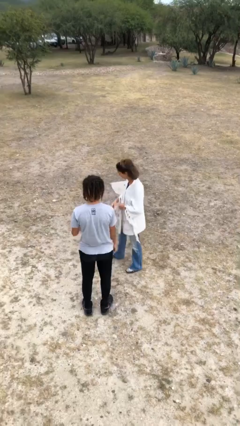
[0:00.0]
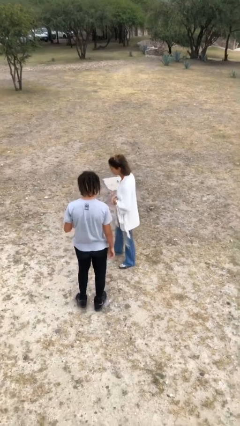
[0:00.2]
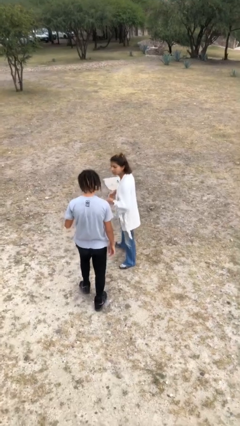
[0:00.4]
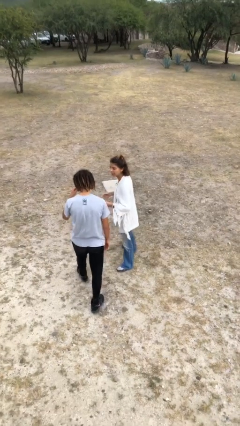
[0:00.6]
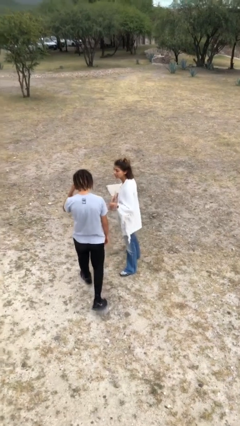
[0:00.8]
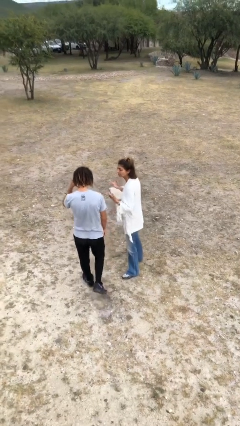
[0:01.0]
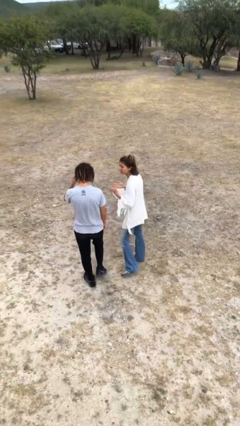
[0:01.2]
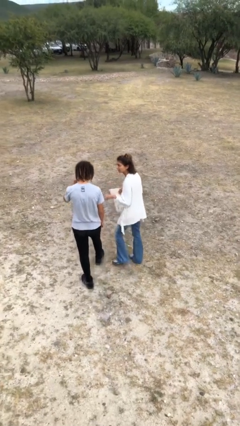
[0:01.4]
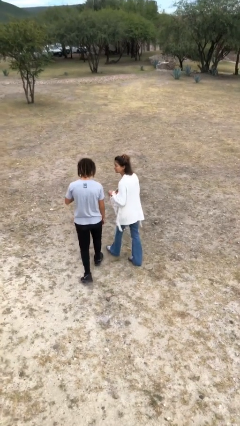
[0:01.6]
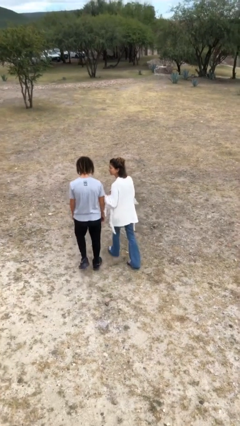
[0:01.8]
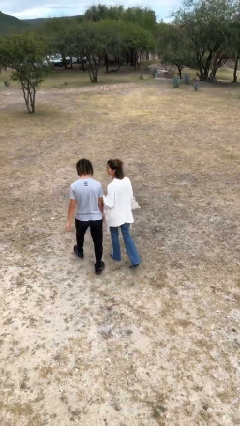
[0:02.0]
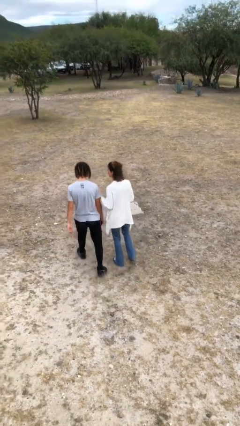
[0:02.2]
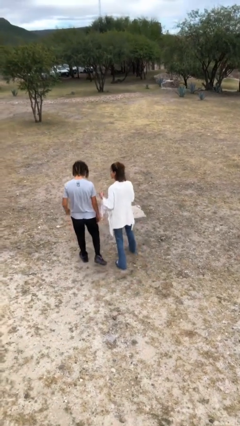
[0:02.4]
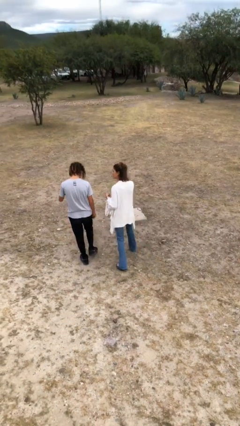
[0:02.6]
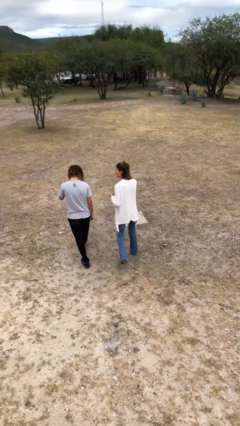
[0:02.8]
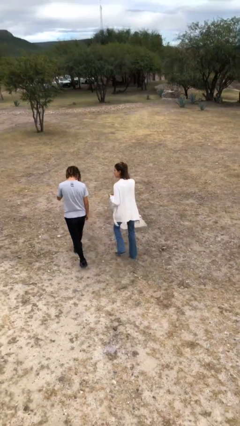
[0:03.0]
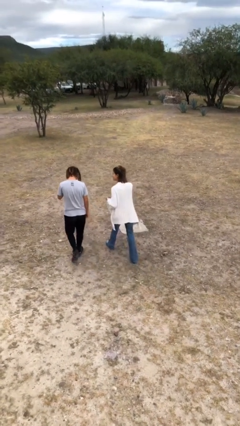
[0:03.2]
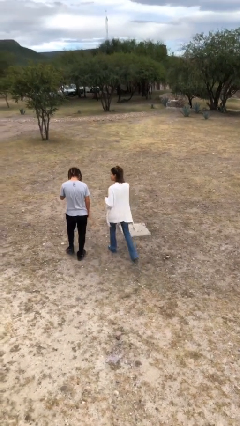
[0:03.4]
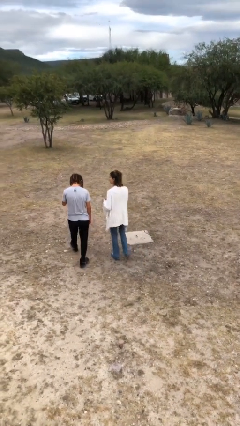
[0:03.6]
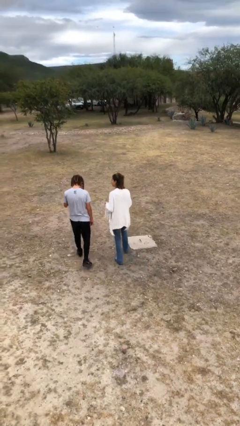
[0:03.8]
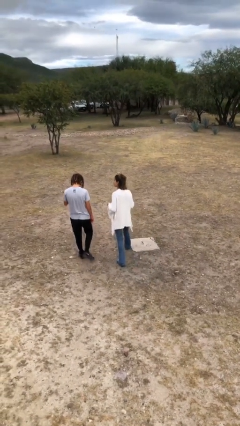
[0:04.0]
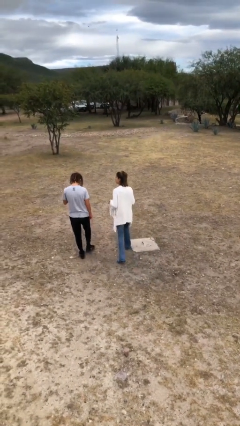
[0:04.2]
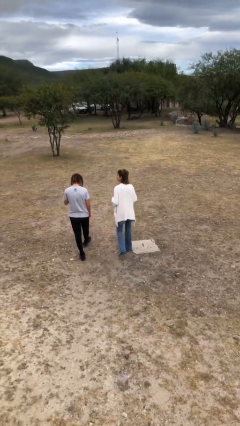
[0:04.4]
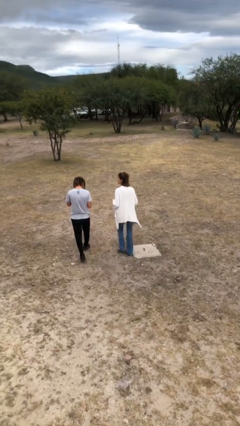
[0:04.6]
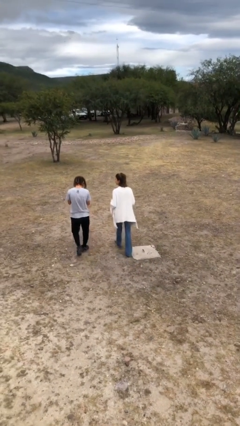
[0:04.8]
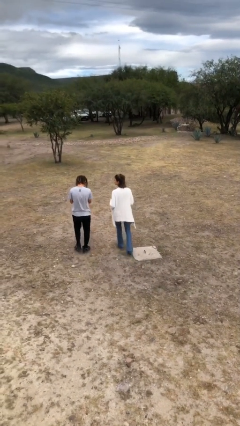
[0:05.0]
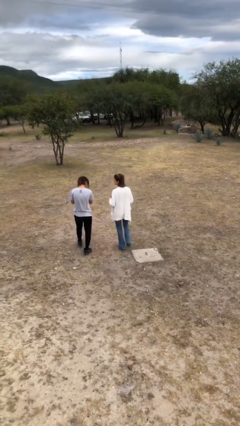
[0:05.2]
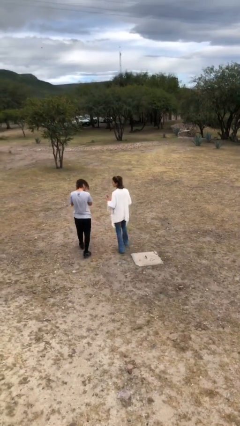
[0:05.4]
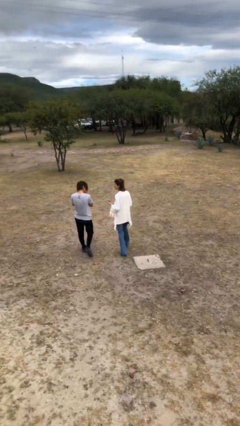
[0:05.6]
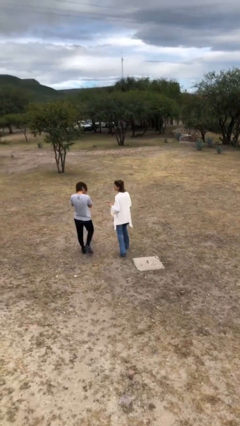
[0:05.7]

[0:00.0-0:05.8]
person talks to person

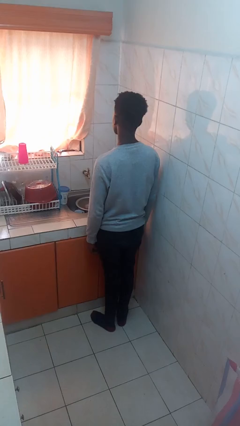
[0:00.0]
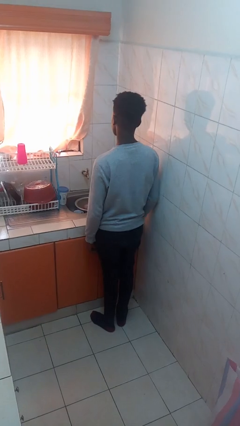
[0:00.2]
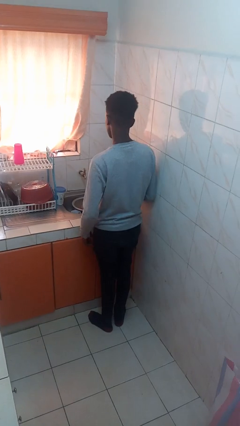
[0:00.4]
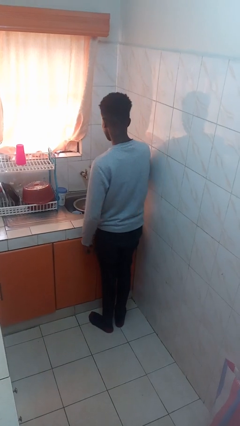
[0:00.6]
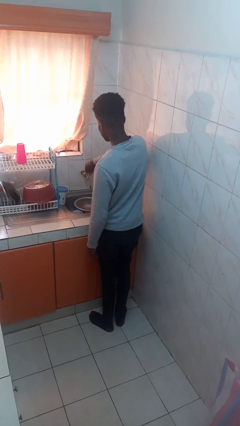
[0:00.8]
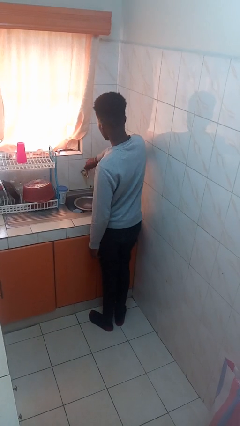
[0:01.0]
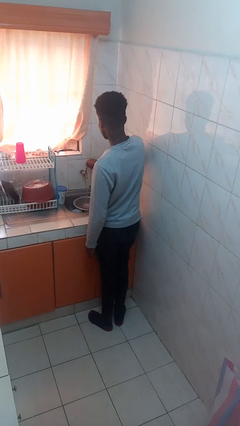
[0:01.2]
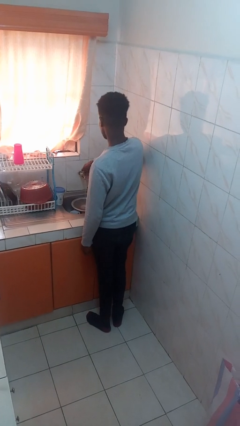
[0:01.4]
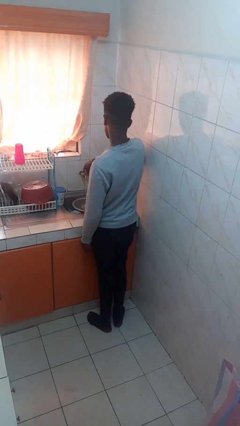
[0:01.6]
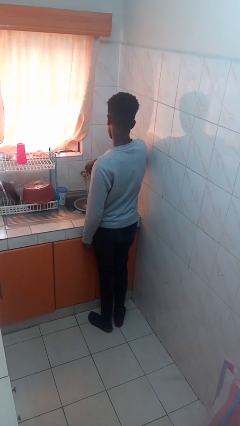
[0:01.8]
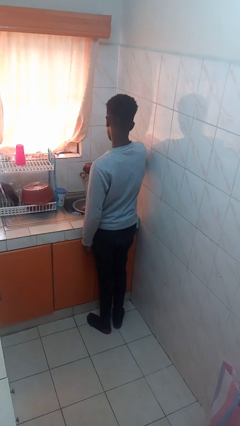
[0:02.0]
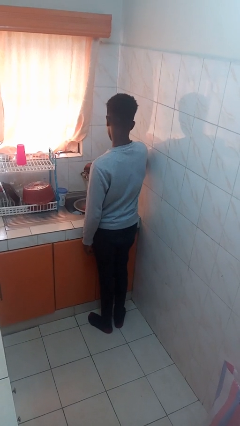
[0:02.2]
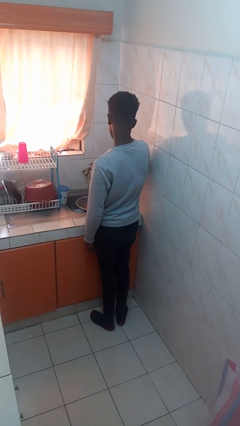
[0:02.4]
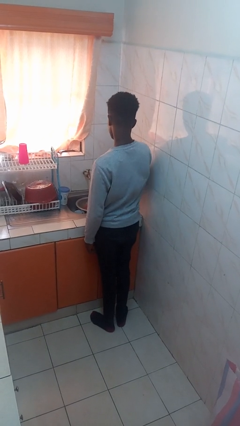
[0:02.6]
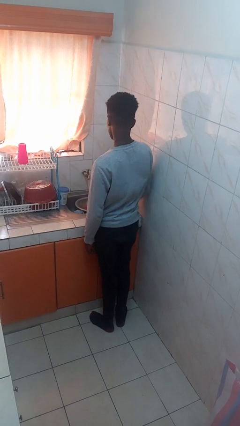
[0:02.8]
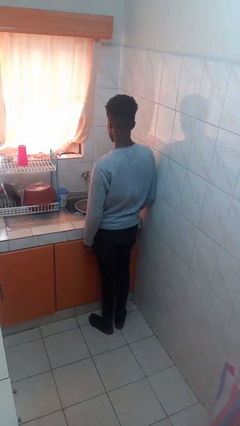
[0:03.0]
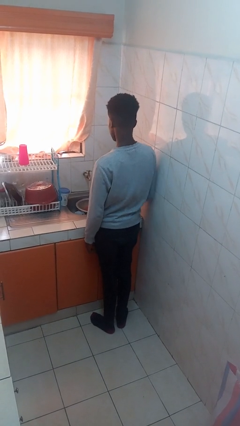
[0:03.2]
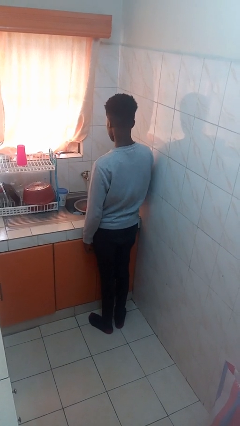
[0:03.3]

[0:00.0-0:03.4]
person turns on faucet

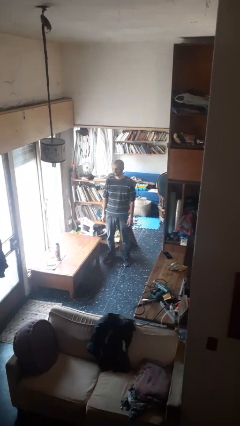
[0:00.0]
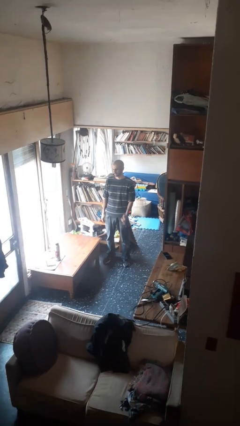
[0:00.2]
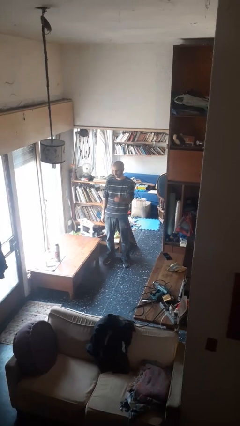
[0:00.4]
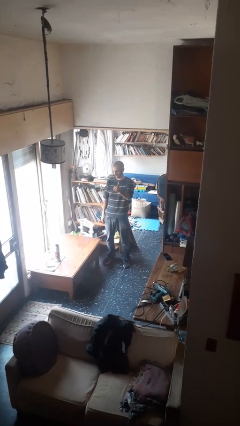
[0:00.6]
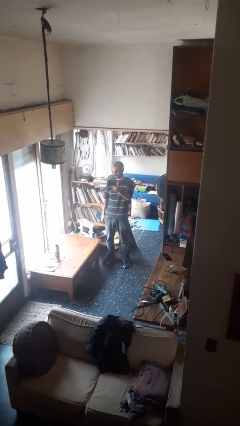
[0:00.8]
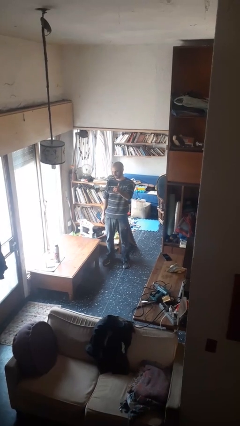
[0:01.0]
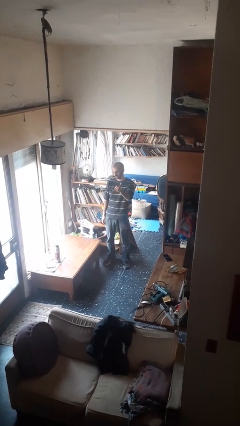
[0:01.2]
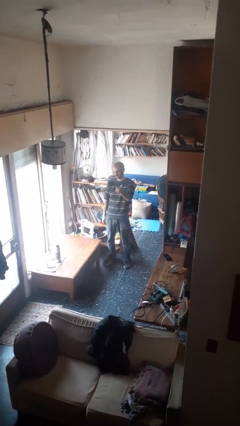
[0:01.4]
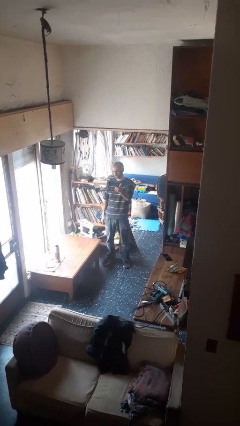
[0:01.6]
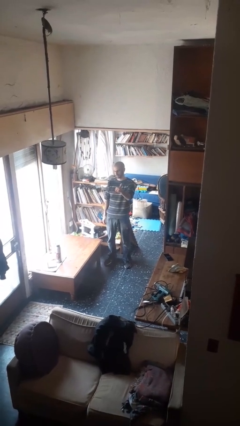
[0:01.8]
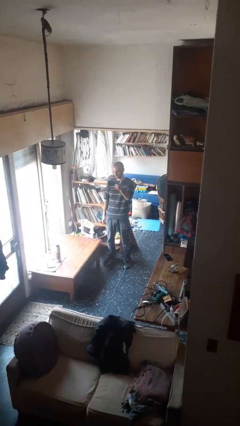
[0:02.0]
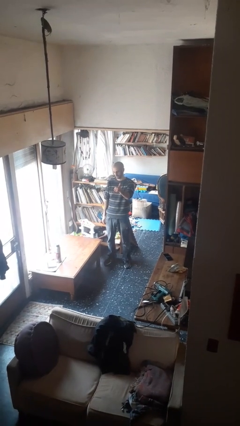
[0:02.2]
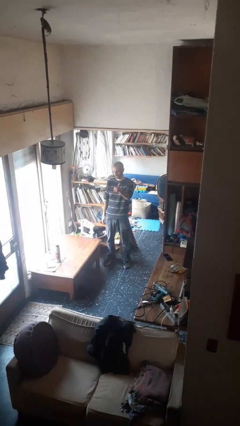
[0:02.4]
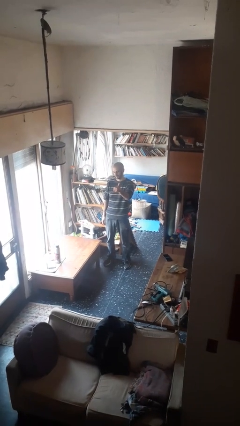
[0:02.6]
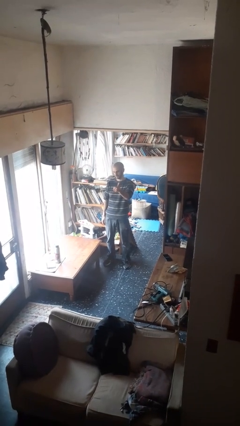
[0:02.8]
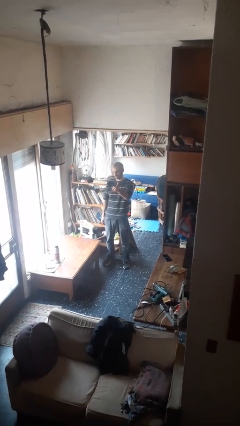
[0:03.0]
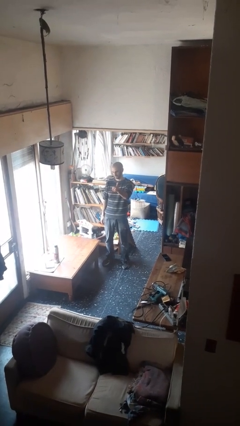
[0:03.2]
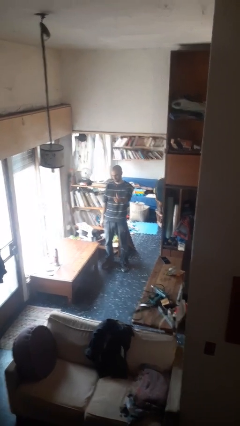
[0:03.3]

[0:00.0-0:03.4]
person gestures hang loose

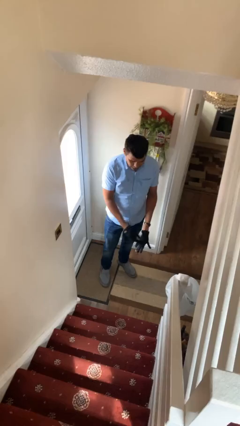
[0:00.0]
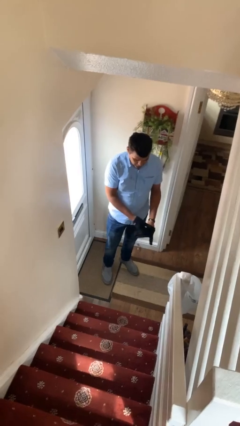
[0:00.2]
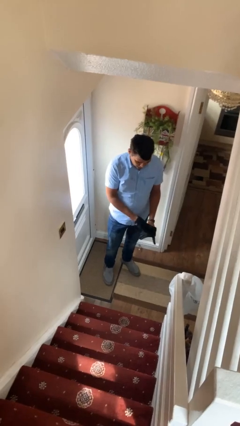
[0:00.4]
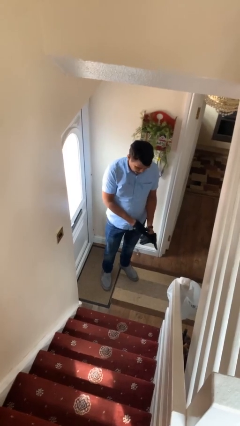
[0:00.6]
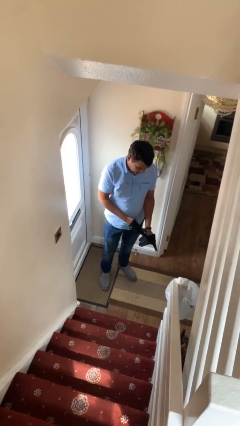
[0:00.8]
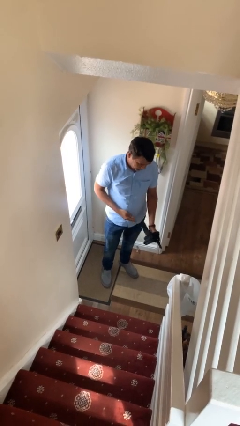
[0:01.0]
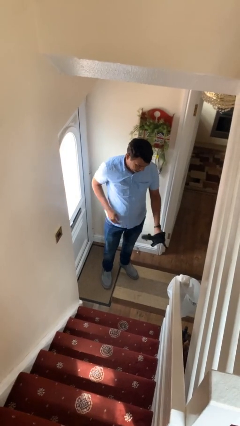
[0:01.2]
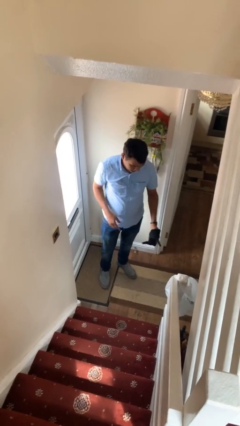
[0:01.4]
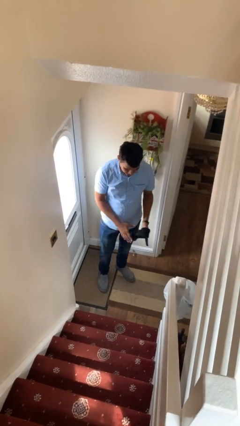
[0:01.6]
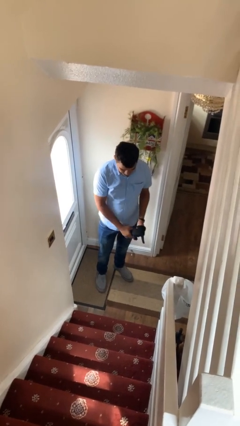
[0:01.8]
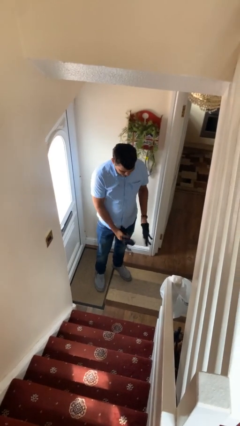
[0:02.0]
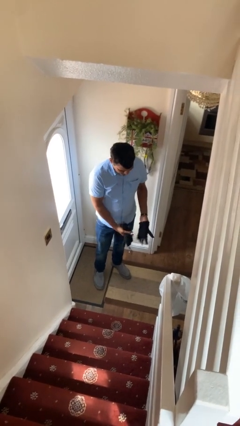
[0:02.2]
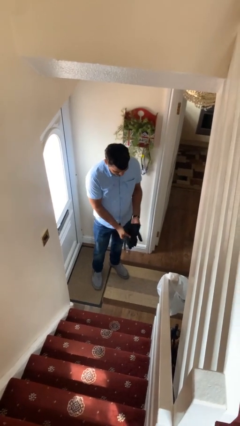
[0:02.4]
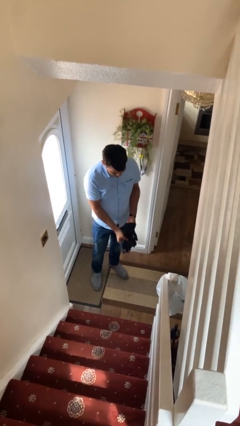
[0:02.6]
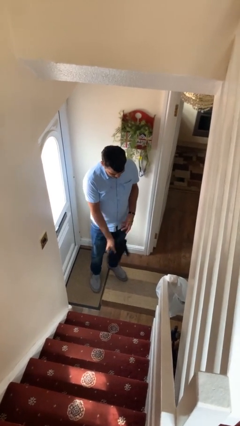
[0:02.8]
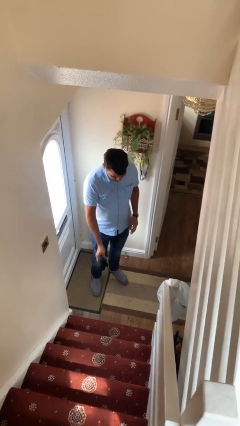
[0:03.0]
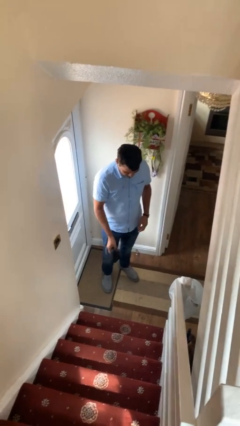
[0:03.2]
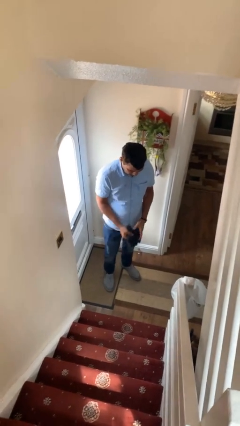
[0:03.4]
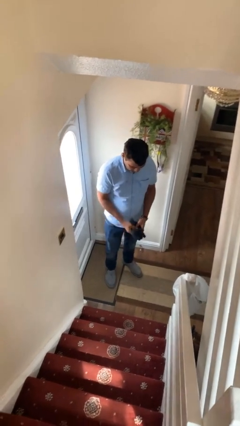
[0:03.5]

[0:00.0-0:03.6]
person takes off gloves

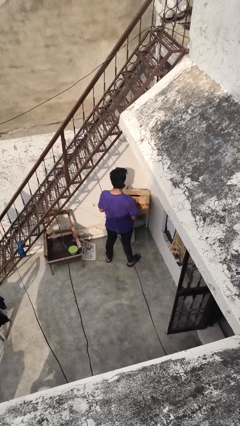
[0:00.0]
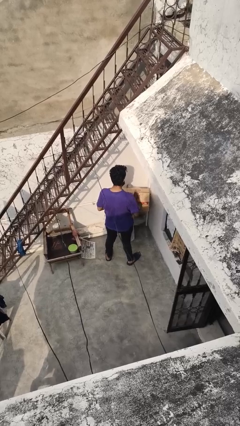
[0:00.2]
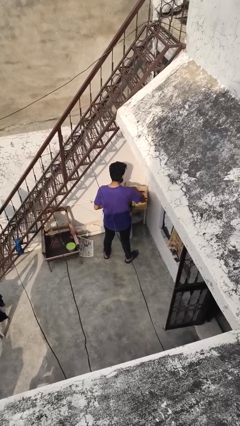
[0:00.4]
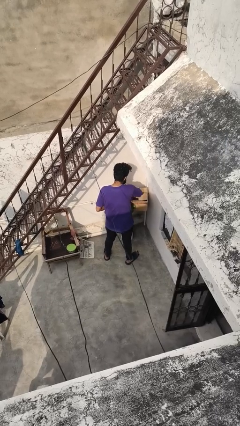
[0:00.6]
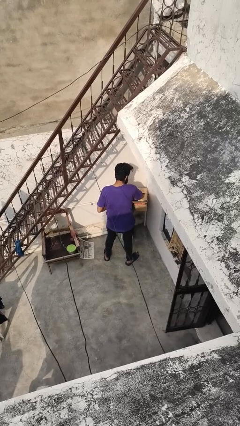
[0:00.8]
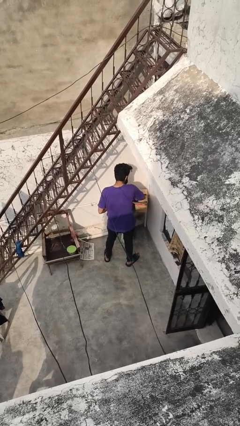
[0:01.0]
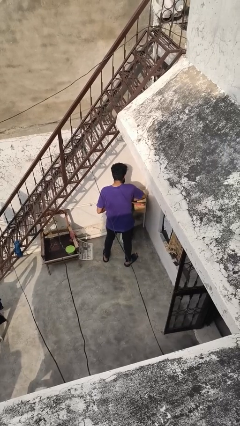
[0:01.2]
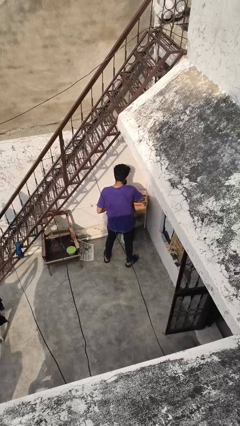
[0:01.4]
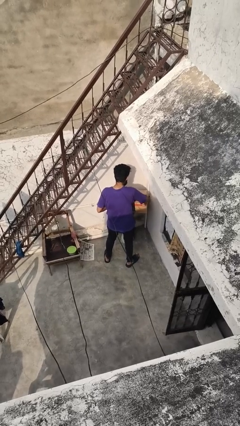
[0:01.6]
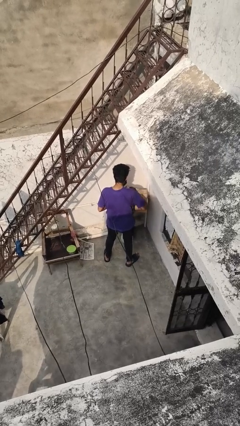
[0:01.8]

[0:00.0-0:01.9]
person searches in box
